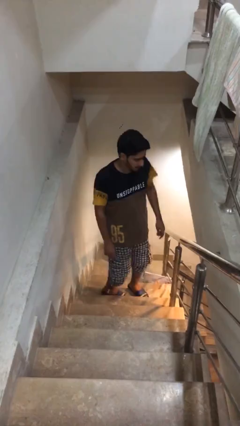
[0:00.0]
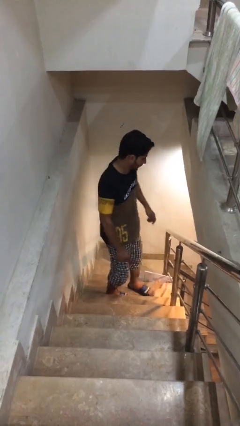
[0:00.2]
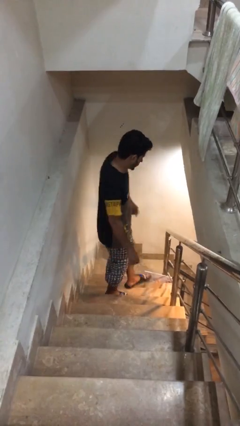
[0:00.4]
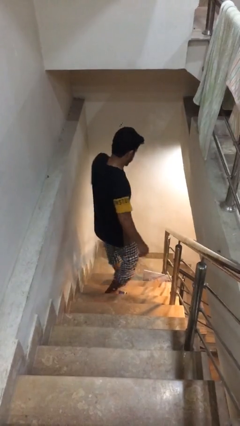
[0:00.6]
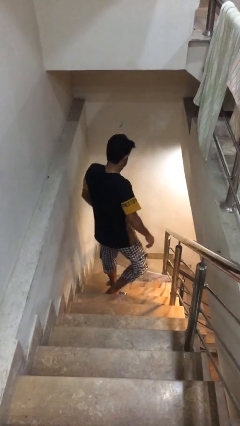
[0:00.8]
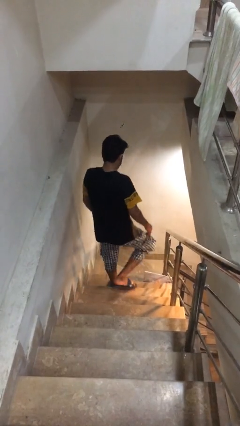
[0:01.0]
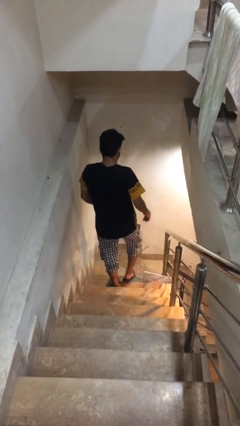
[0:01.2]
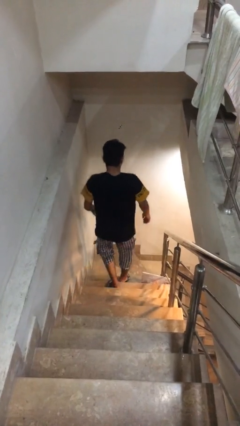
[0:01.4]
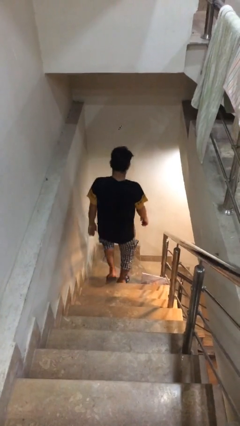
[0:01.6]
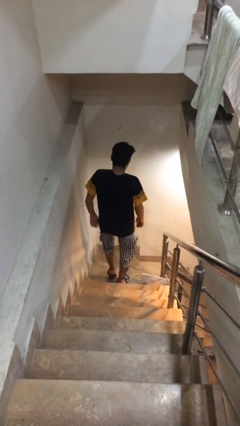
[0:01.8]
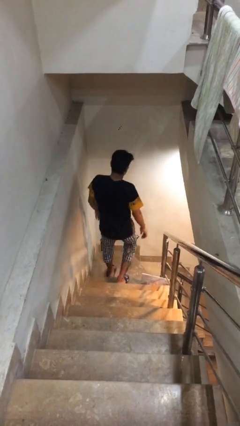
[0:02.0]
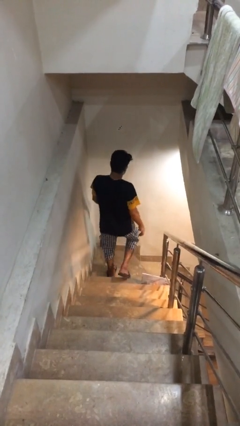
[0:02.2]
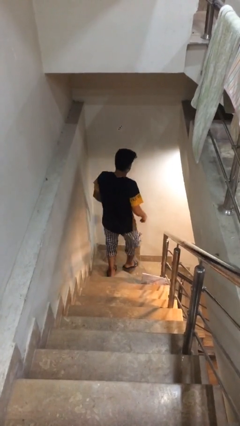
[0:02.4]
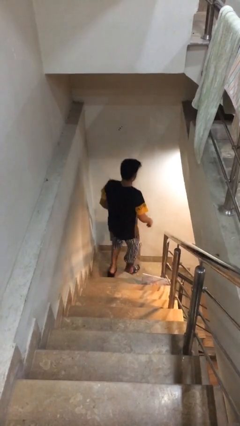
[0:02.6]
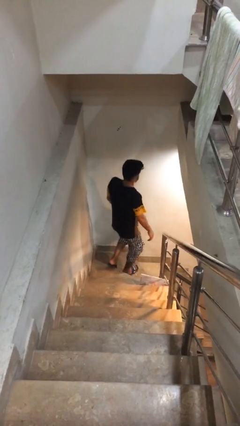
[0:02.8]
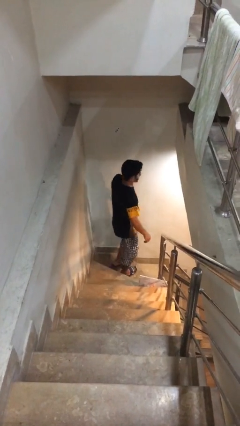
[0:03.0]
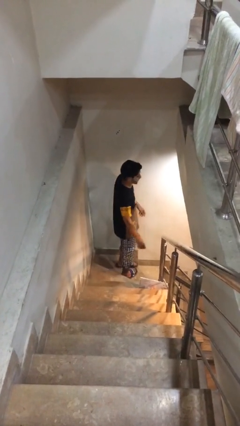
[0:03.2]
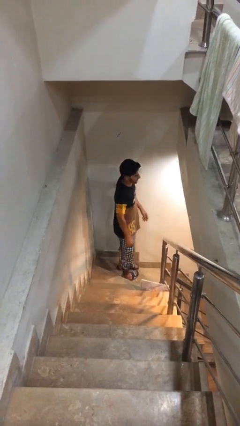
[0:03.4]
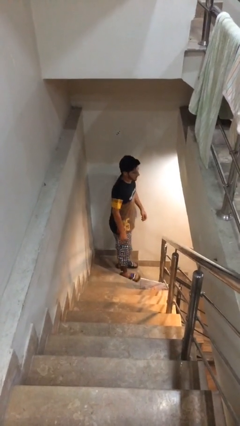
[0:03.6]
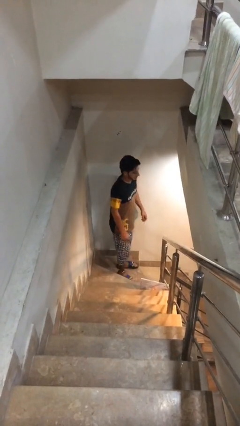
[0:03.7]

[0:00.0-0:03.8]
person climbs down stairs

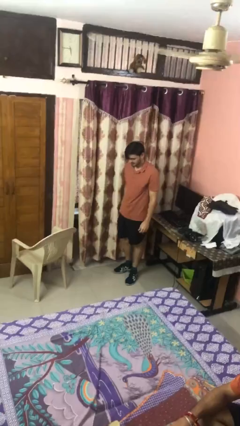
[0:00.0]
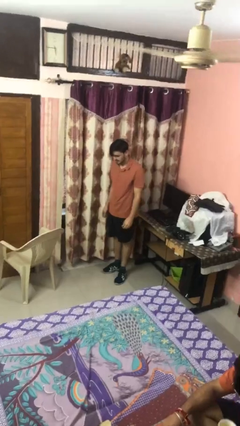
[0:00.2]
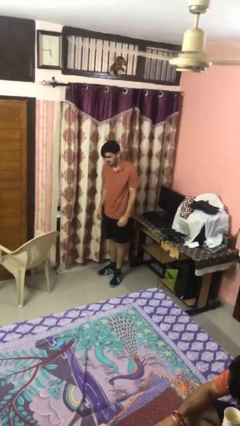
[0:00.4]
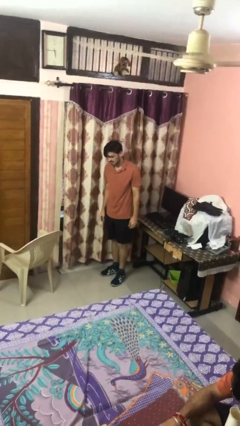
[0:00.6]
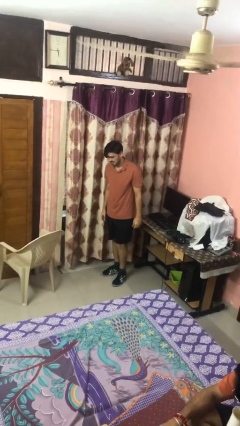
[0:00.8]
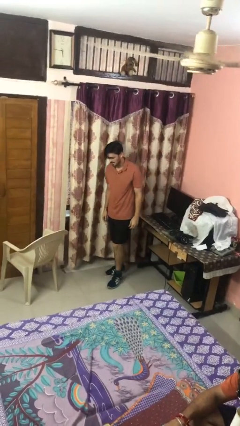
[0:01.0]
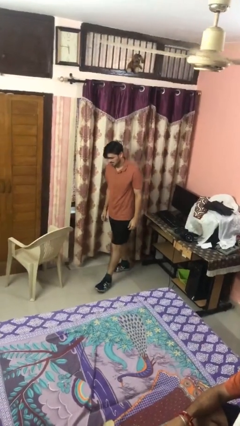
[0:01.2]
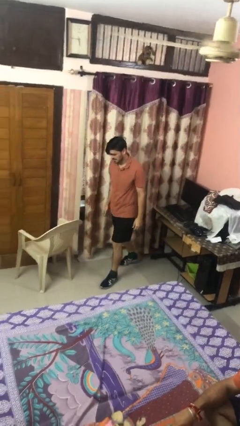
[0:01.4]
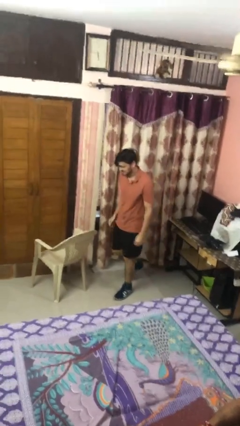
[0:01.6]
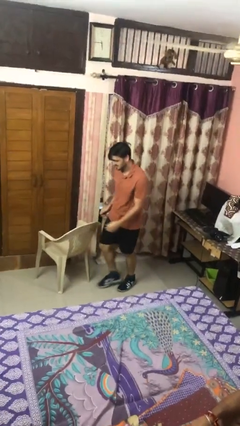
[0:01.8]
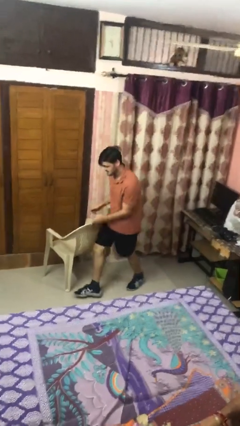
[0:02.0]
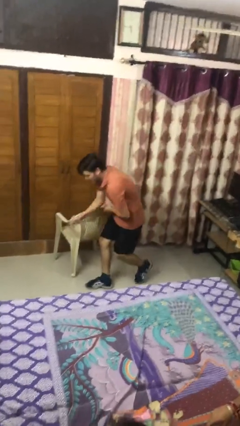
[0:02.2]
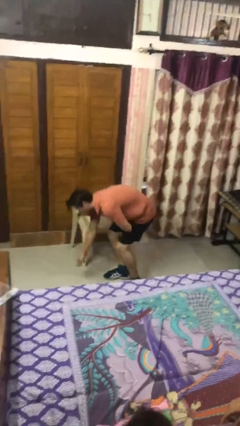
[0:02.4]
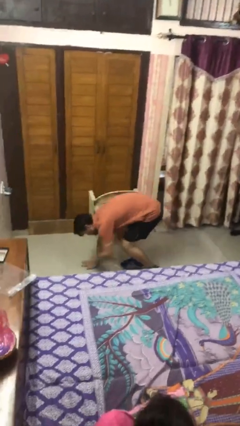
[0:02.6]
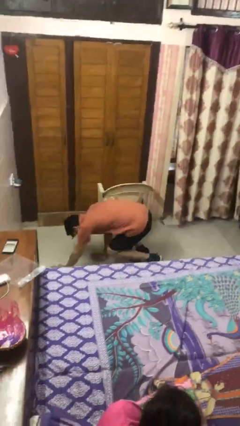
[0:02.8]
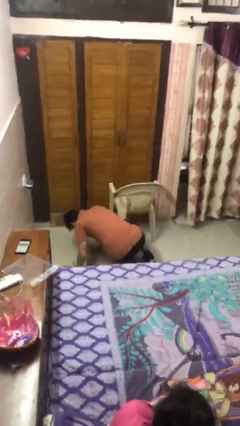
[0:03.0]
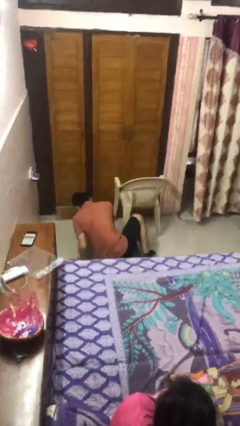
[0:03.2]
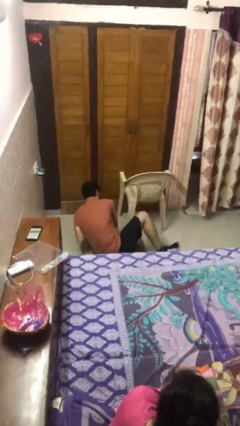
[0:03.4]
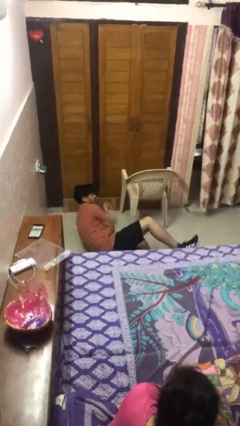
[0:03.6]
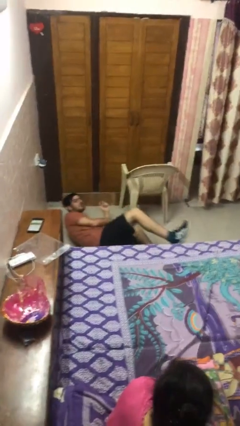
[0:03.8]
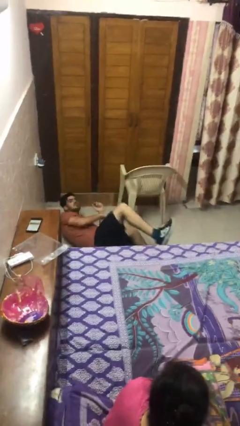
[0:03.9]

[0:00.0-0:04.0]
person trips on object on floor

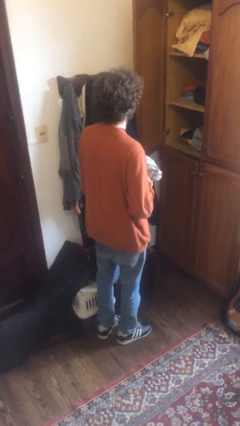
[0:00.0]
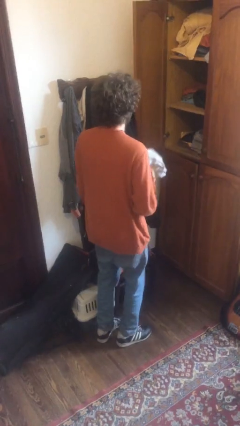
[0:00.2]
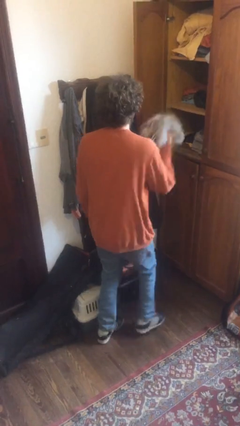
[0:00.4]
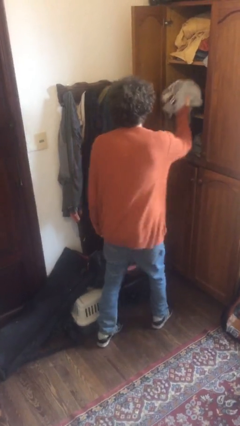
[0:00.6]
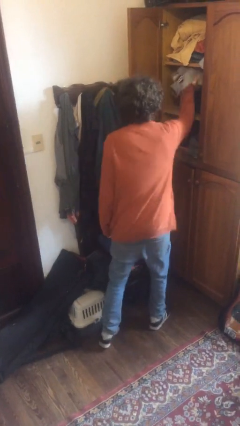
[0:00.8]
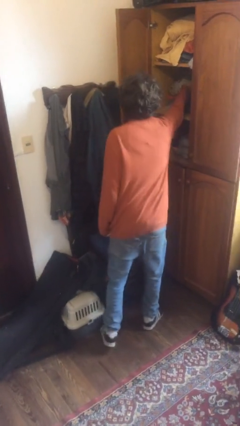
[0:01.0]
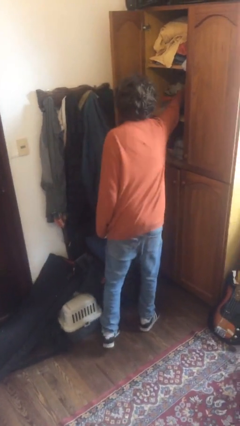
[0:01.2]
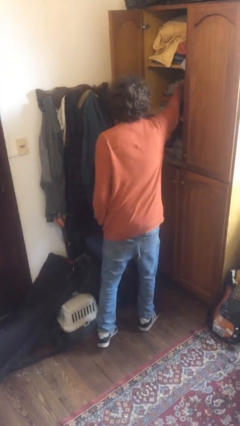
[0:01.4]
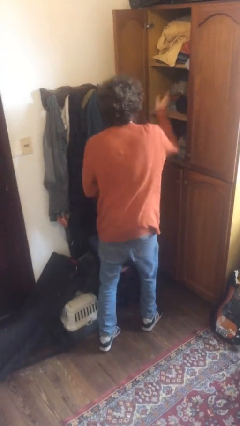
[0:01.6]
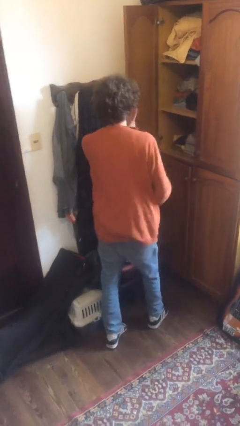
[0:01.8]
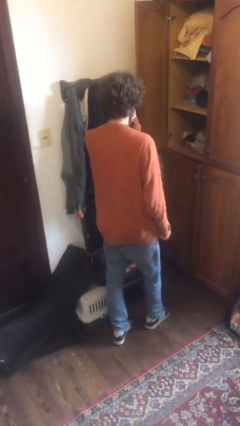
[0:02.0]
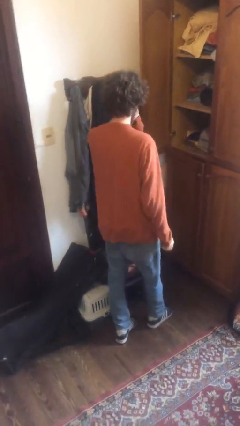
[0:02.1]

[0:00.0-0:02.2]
person puts clothes into dresser

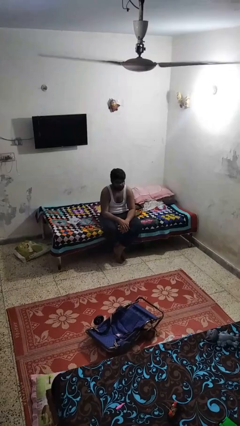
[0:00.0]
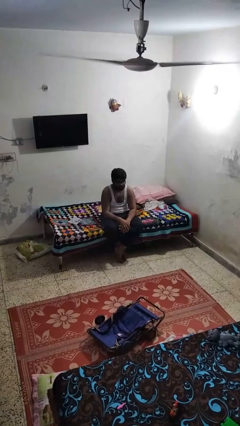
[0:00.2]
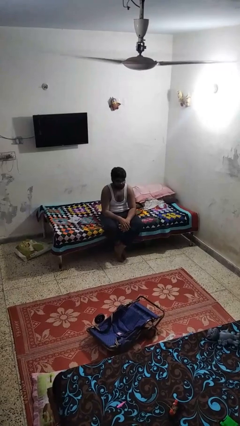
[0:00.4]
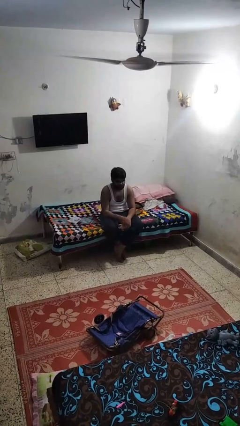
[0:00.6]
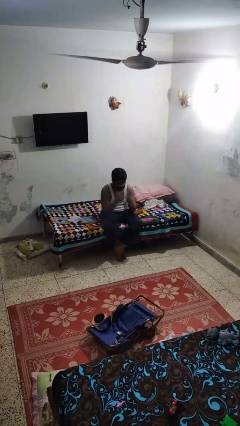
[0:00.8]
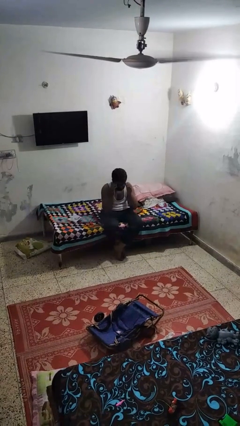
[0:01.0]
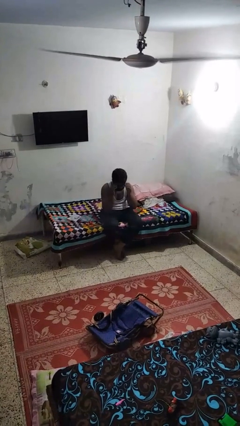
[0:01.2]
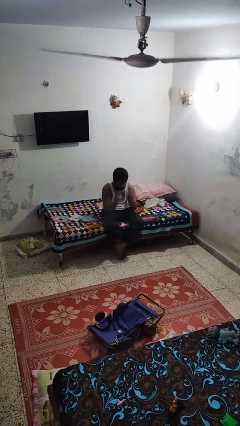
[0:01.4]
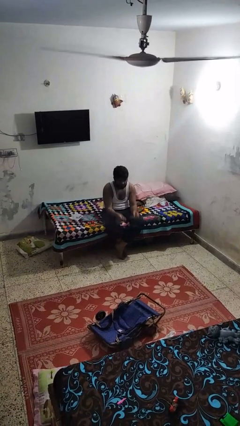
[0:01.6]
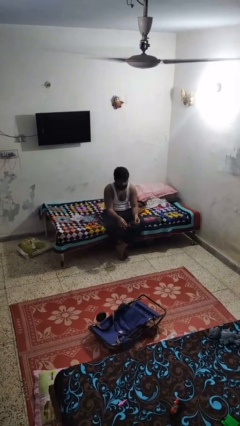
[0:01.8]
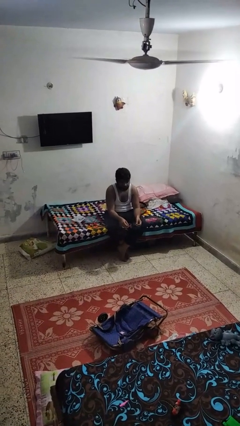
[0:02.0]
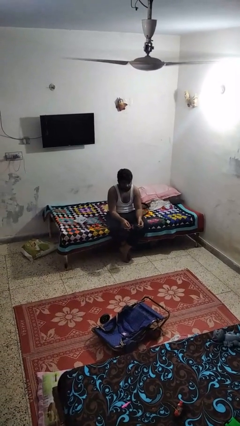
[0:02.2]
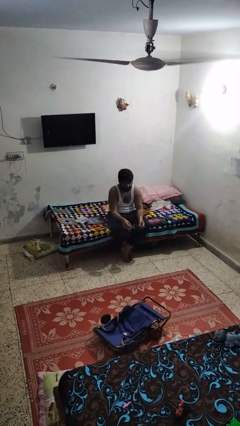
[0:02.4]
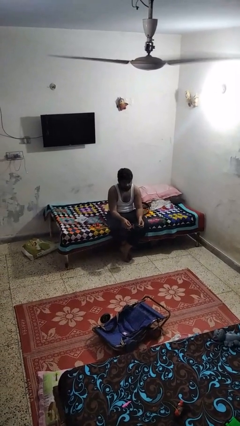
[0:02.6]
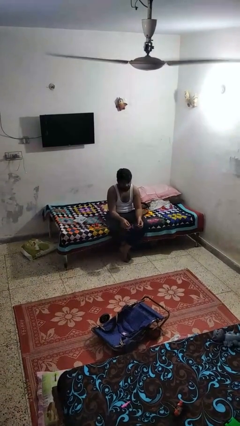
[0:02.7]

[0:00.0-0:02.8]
person takes off glasses

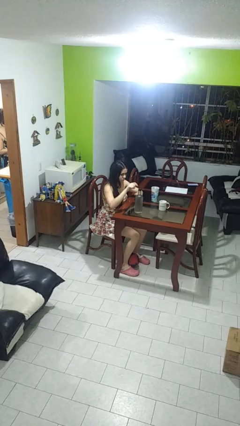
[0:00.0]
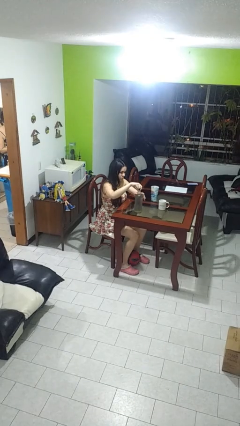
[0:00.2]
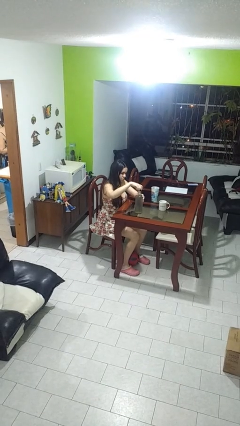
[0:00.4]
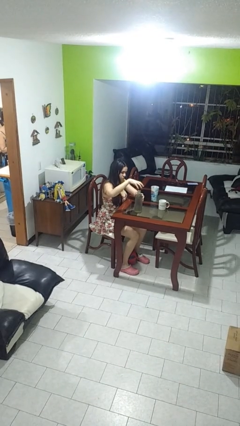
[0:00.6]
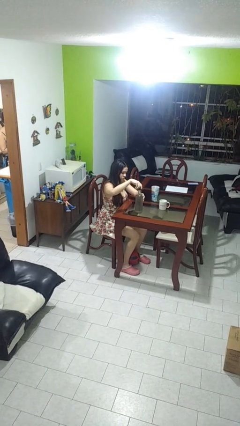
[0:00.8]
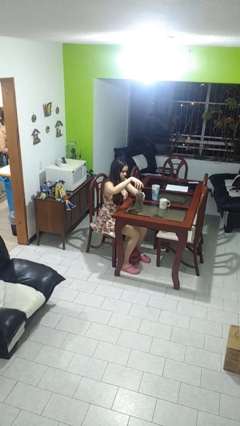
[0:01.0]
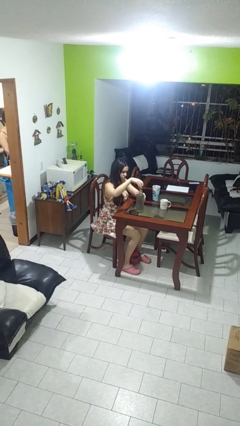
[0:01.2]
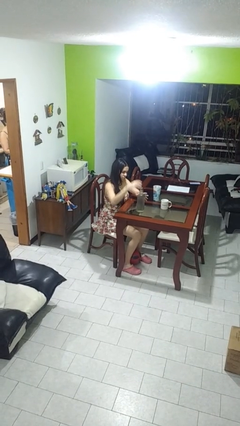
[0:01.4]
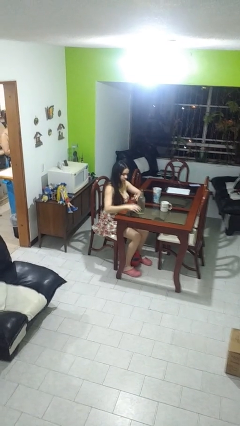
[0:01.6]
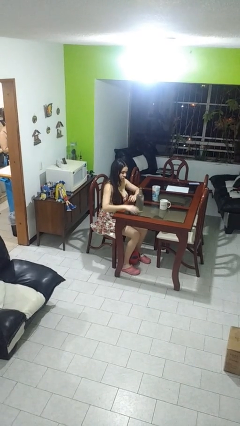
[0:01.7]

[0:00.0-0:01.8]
person unscrews lid from bottle

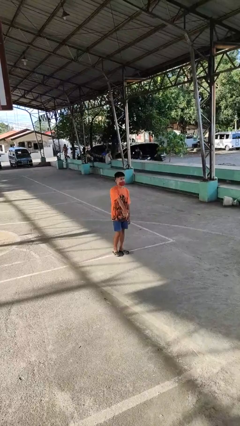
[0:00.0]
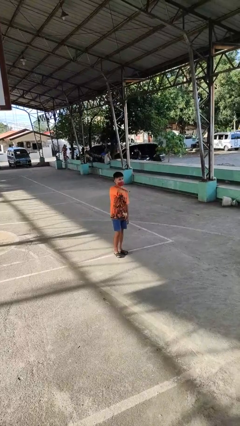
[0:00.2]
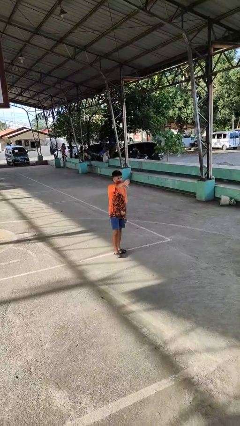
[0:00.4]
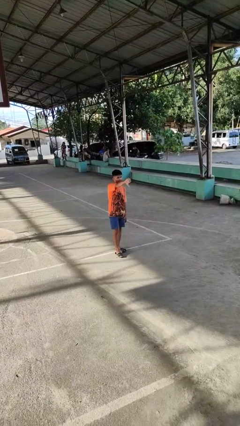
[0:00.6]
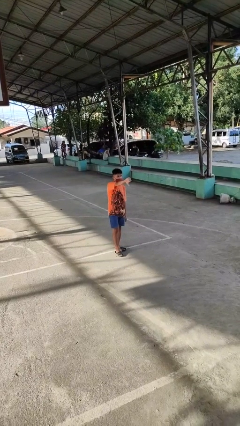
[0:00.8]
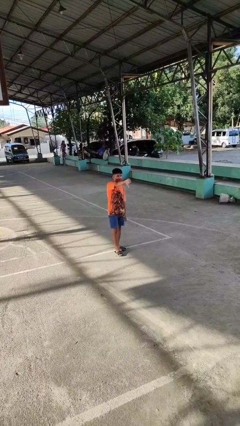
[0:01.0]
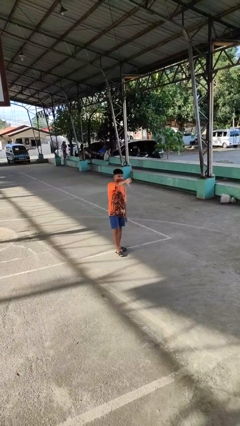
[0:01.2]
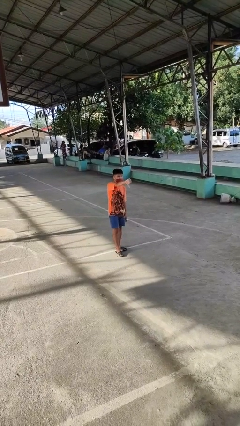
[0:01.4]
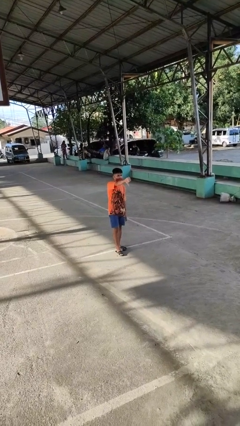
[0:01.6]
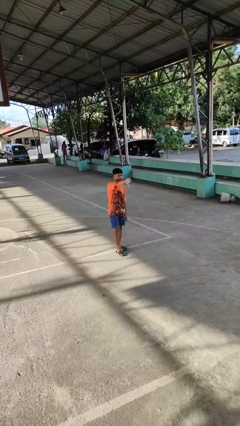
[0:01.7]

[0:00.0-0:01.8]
person gestures thumbs down

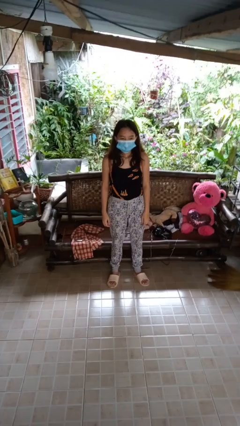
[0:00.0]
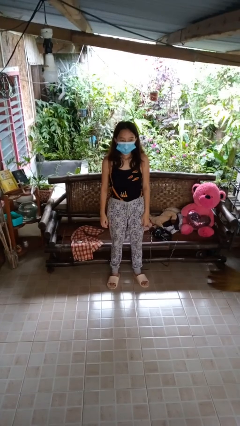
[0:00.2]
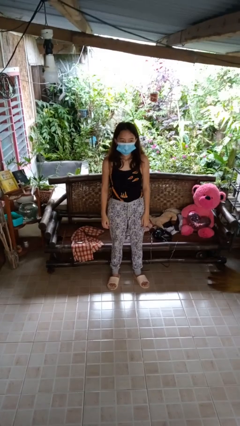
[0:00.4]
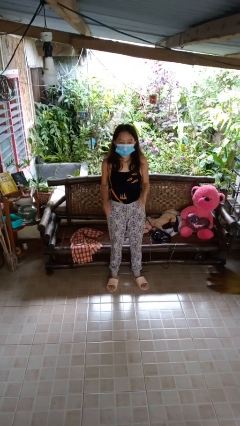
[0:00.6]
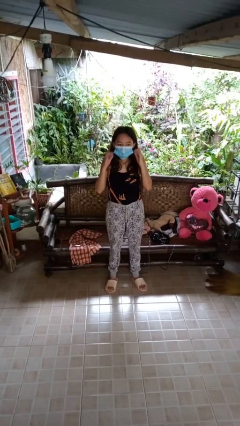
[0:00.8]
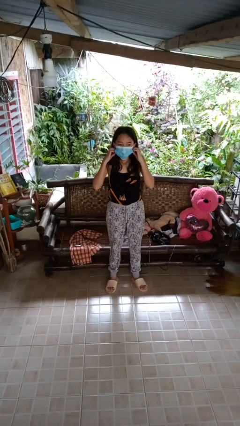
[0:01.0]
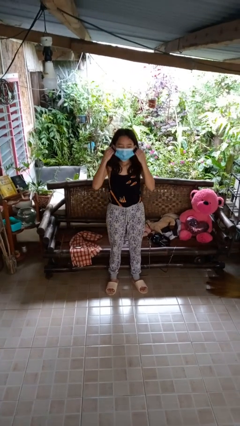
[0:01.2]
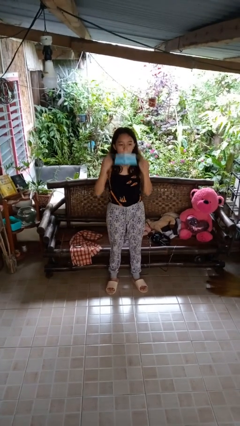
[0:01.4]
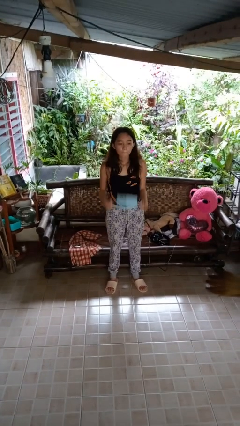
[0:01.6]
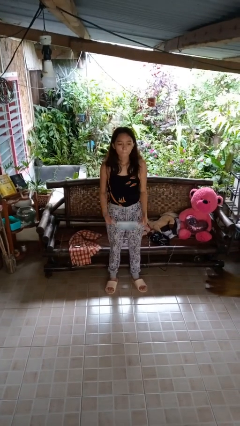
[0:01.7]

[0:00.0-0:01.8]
person takes off facemask
